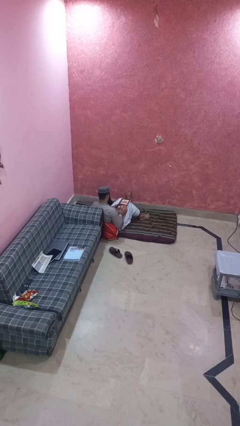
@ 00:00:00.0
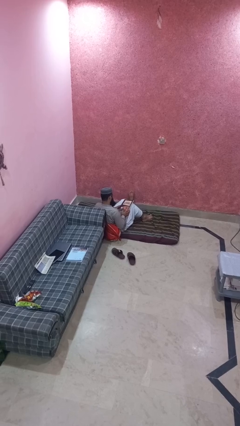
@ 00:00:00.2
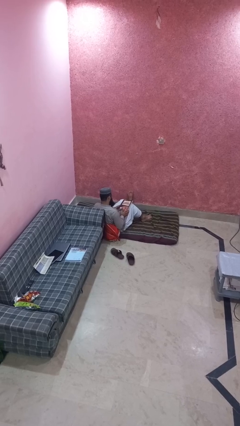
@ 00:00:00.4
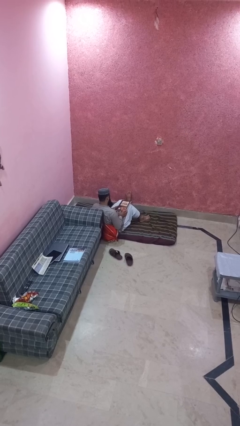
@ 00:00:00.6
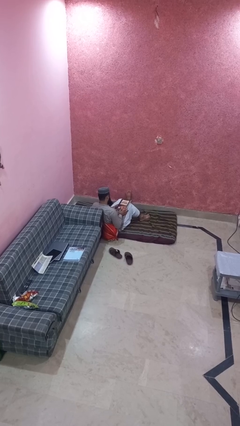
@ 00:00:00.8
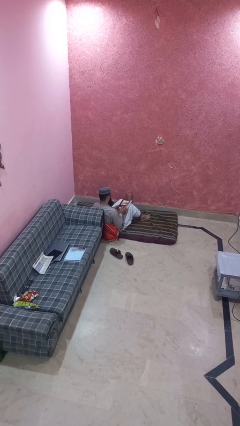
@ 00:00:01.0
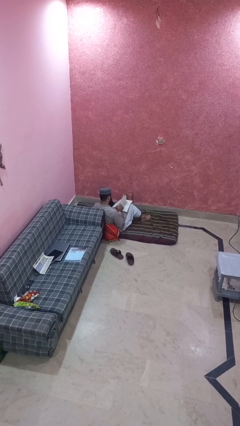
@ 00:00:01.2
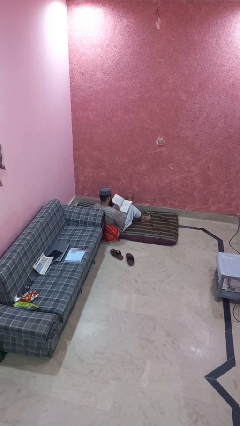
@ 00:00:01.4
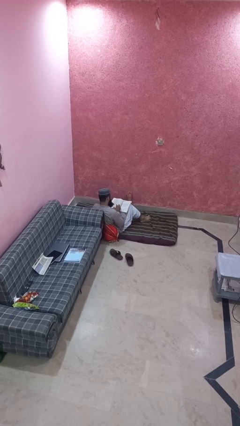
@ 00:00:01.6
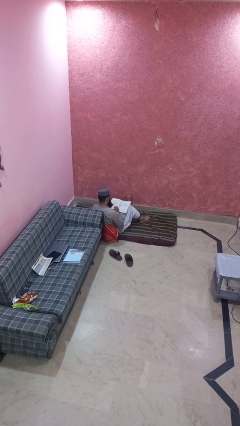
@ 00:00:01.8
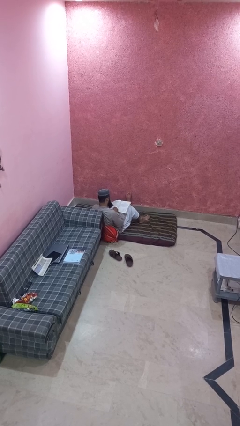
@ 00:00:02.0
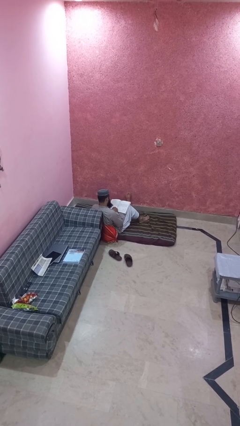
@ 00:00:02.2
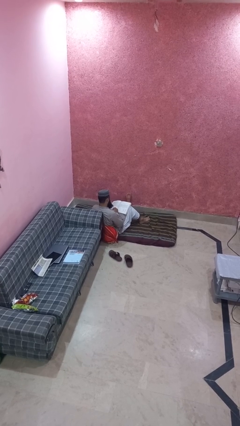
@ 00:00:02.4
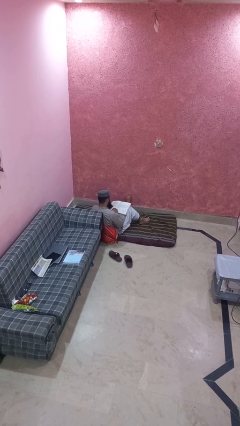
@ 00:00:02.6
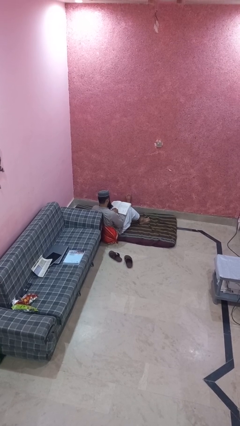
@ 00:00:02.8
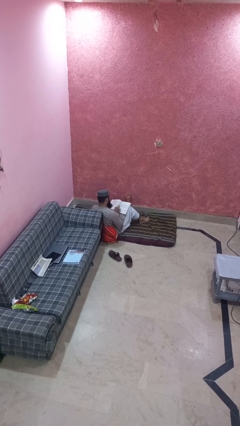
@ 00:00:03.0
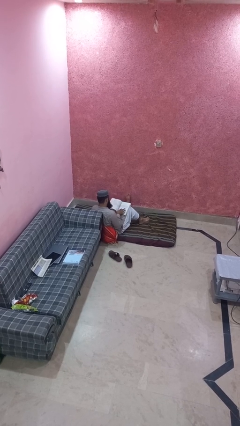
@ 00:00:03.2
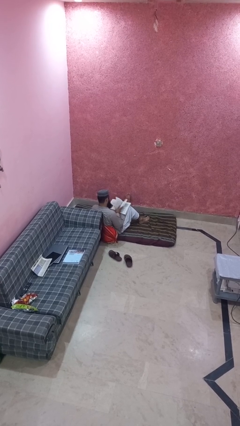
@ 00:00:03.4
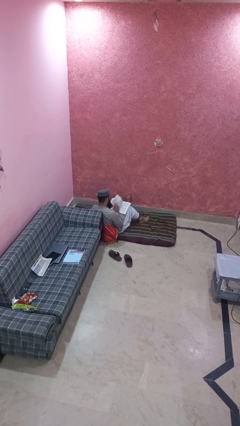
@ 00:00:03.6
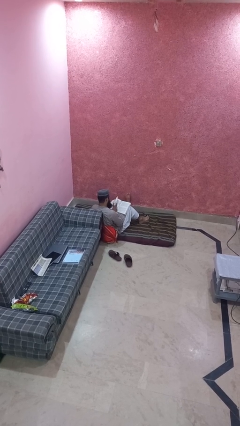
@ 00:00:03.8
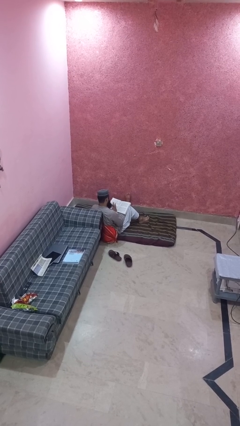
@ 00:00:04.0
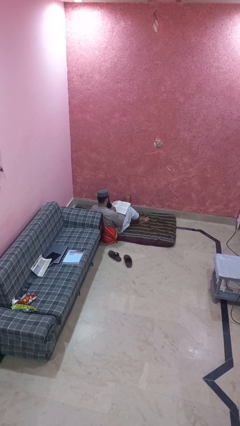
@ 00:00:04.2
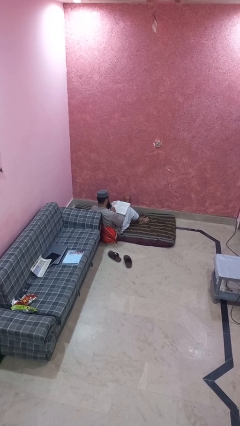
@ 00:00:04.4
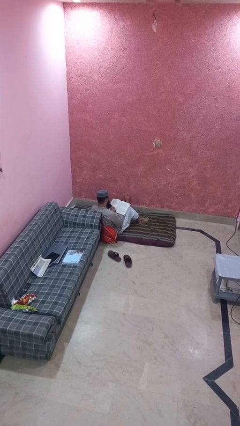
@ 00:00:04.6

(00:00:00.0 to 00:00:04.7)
person reads book

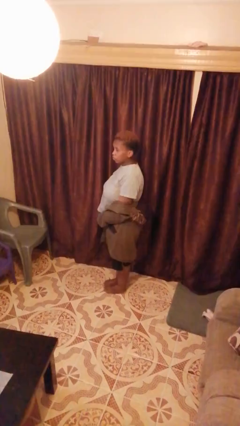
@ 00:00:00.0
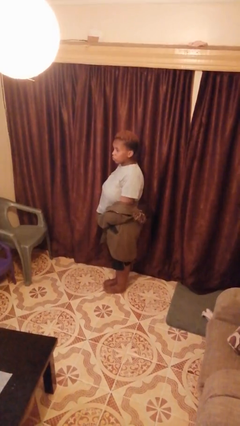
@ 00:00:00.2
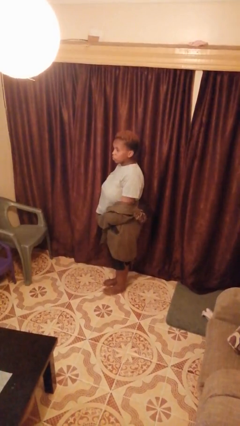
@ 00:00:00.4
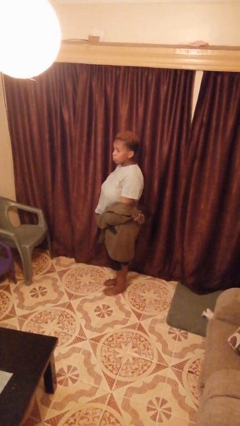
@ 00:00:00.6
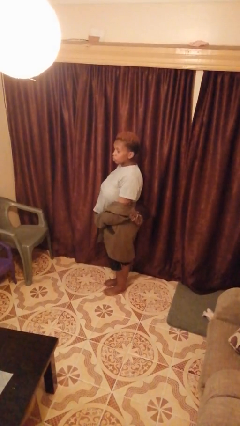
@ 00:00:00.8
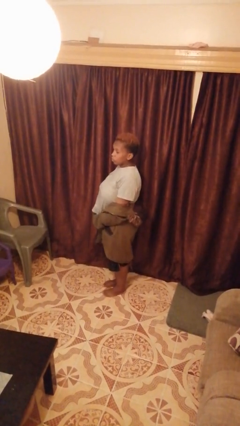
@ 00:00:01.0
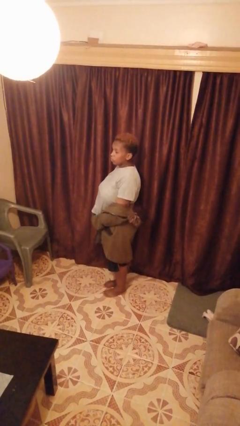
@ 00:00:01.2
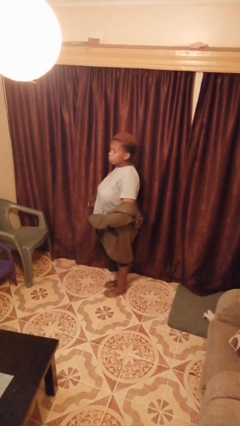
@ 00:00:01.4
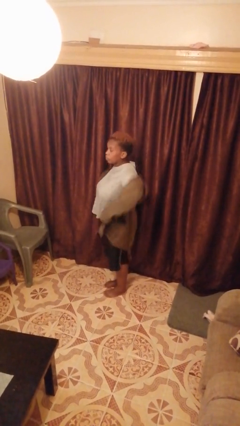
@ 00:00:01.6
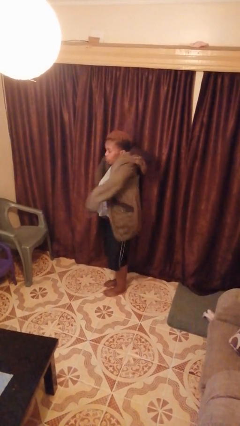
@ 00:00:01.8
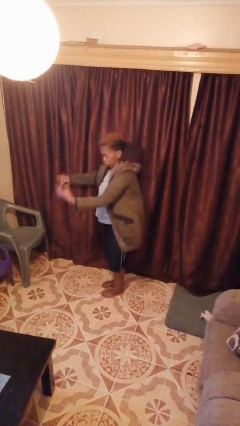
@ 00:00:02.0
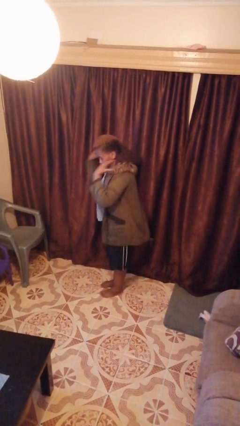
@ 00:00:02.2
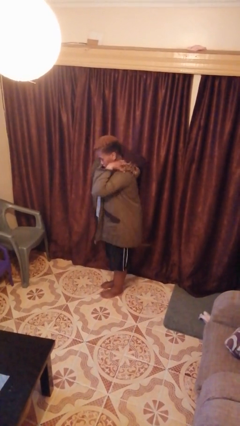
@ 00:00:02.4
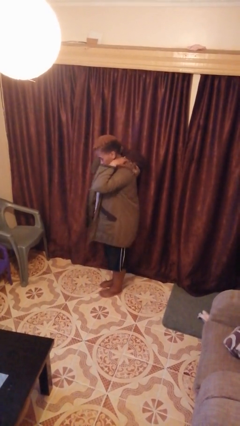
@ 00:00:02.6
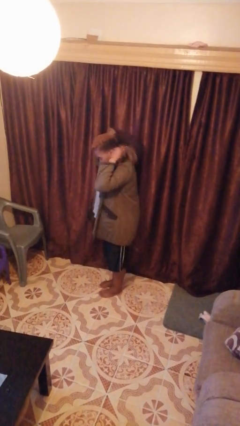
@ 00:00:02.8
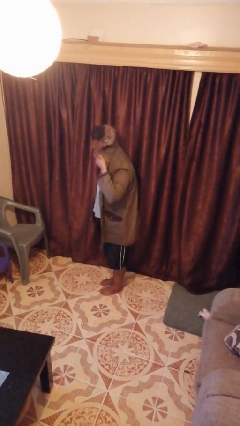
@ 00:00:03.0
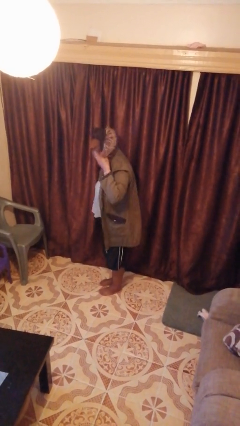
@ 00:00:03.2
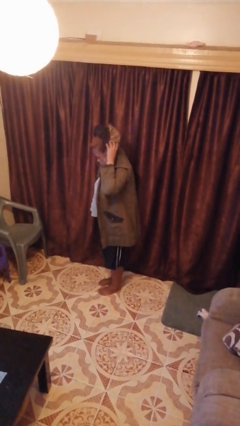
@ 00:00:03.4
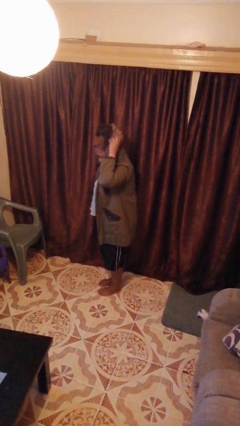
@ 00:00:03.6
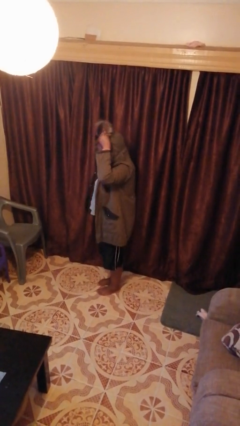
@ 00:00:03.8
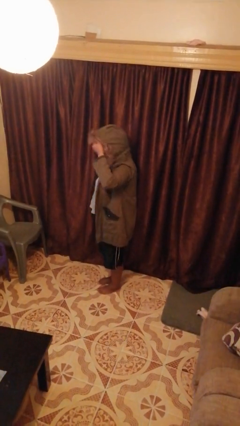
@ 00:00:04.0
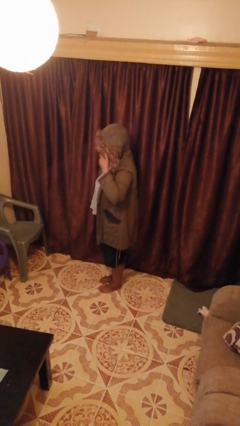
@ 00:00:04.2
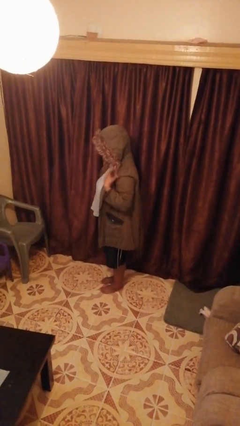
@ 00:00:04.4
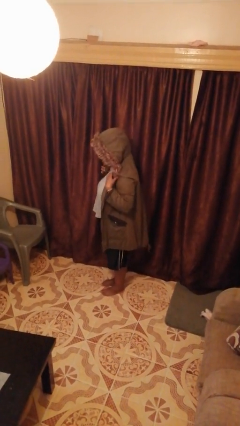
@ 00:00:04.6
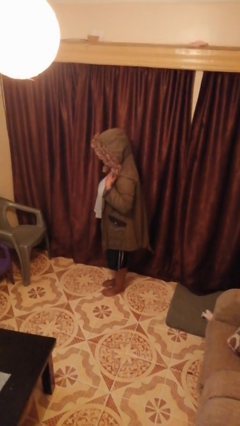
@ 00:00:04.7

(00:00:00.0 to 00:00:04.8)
person puts on hoodie

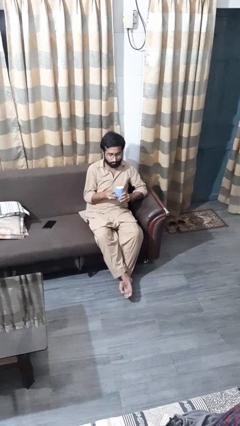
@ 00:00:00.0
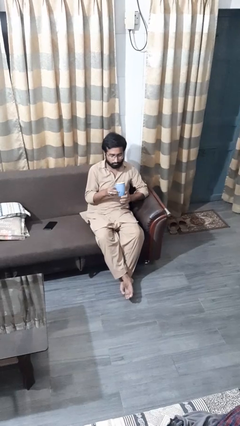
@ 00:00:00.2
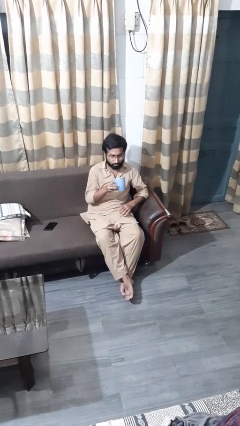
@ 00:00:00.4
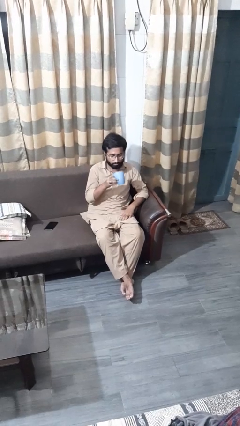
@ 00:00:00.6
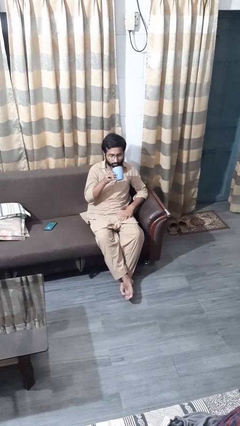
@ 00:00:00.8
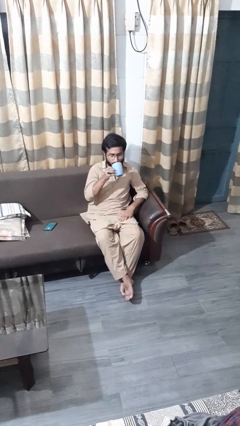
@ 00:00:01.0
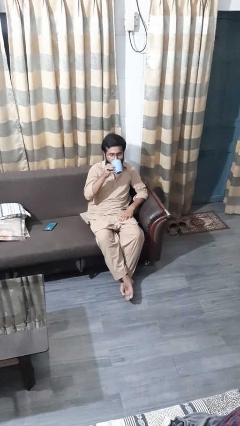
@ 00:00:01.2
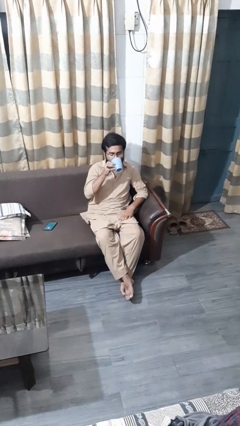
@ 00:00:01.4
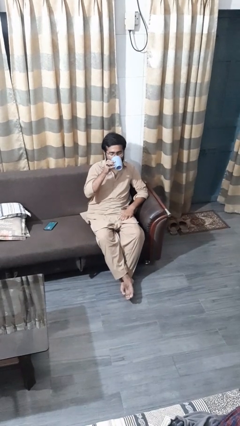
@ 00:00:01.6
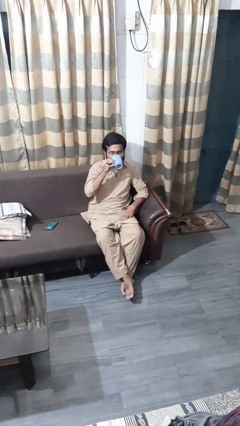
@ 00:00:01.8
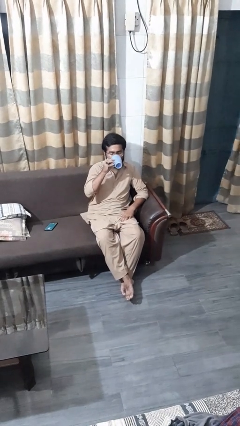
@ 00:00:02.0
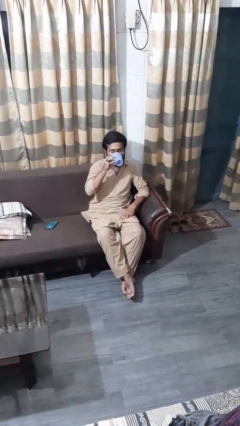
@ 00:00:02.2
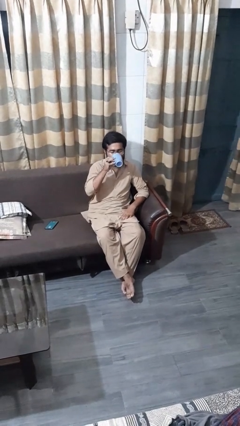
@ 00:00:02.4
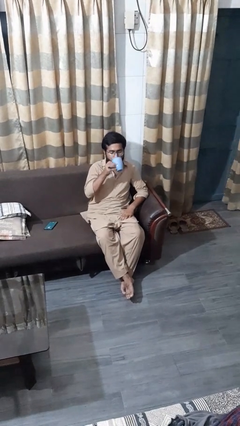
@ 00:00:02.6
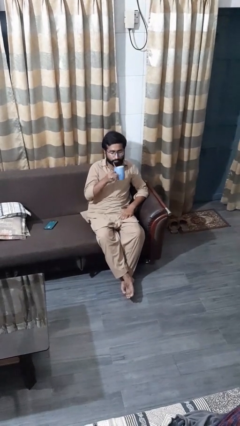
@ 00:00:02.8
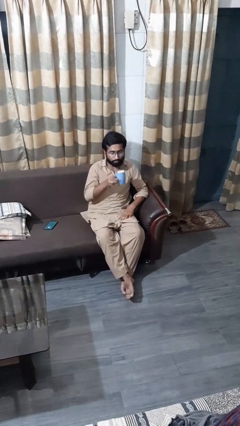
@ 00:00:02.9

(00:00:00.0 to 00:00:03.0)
person drinks from mug

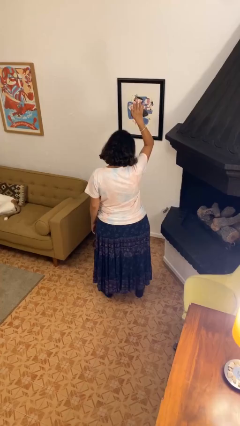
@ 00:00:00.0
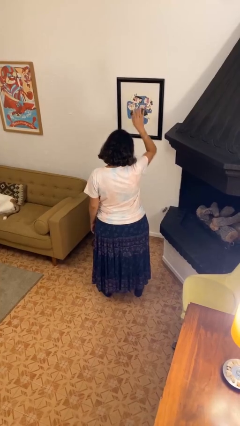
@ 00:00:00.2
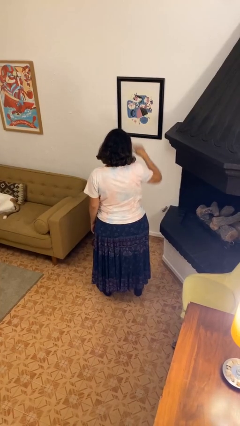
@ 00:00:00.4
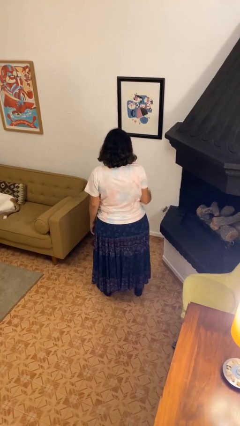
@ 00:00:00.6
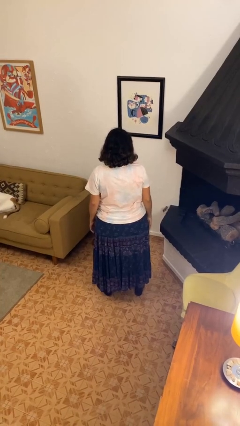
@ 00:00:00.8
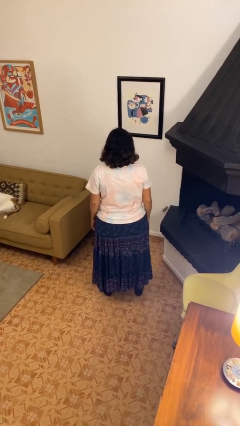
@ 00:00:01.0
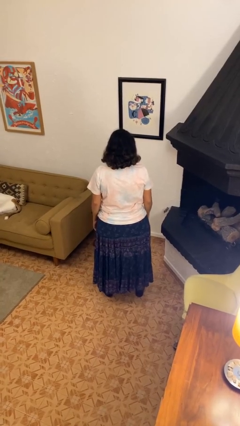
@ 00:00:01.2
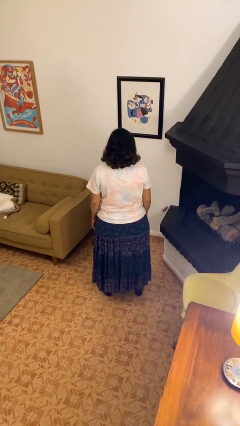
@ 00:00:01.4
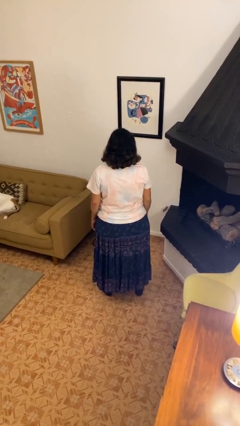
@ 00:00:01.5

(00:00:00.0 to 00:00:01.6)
person gestures lower hand

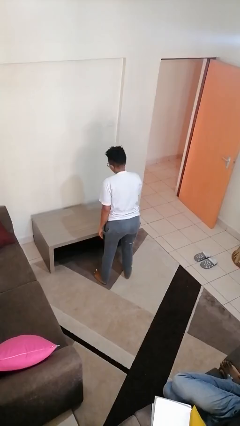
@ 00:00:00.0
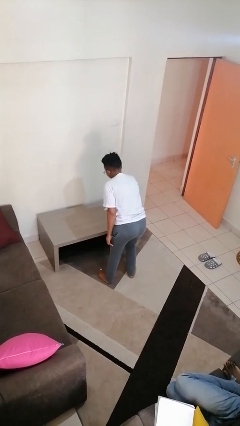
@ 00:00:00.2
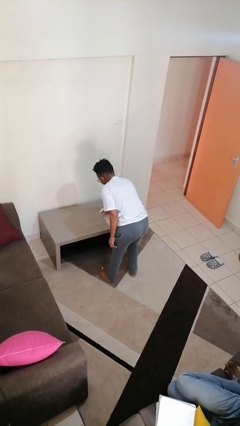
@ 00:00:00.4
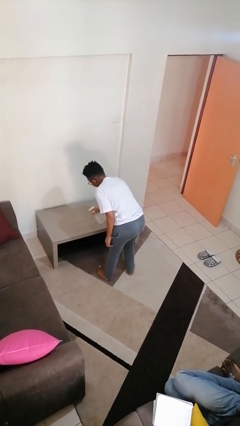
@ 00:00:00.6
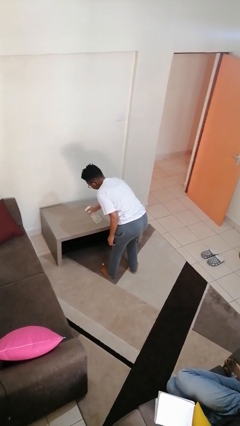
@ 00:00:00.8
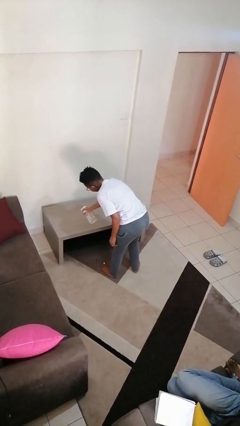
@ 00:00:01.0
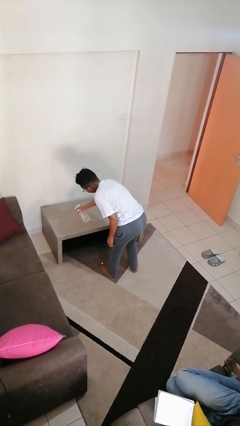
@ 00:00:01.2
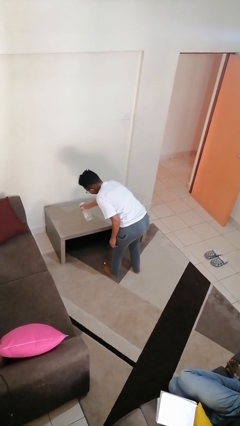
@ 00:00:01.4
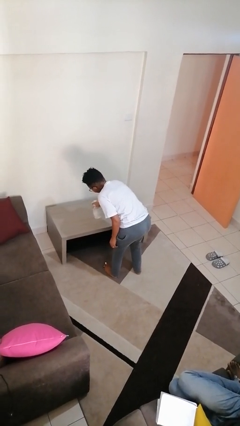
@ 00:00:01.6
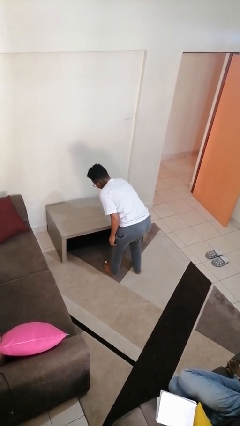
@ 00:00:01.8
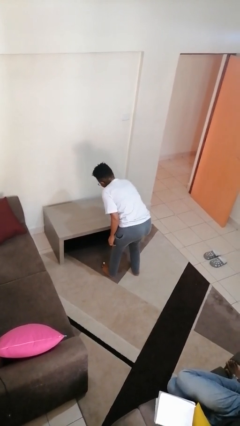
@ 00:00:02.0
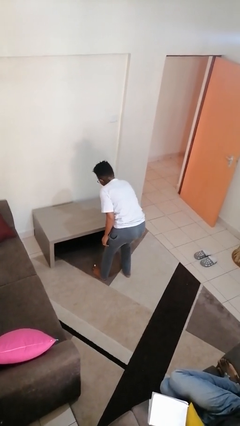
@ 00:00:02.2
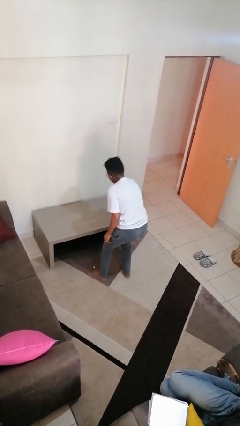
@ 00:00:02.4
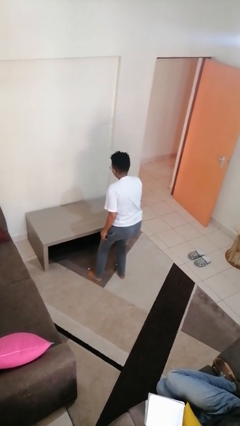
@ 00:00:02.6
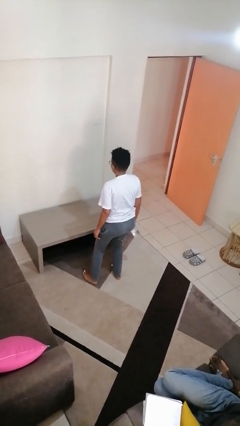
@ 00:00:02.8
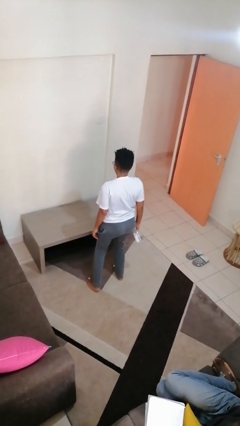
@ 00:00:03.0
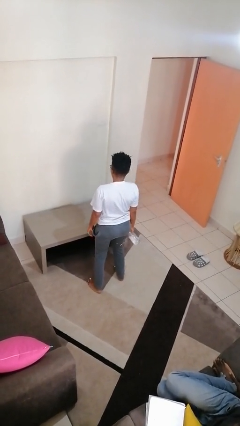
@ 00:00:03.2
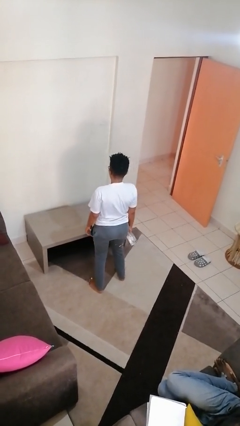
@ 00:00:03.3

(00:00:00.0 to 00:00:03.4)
person sprays from bottle
